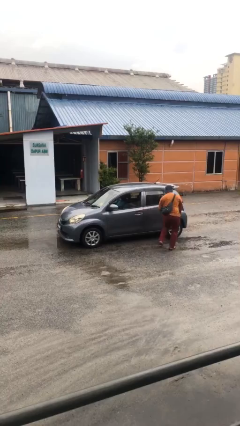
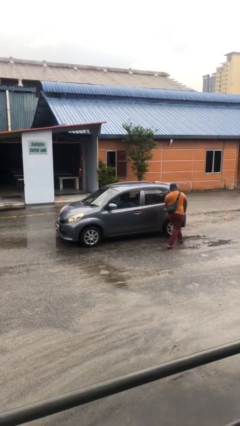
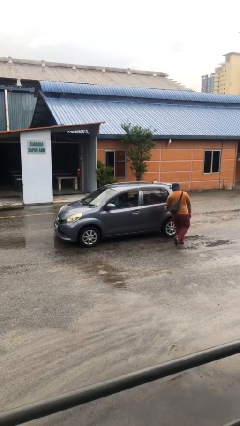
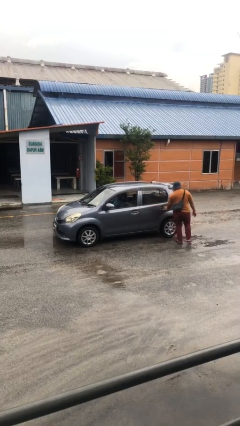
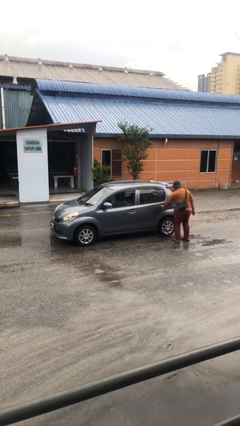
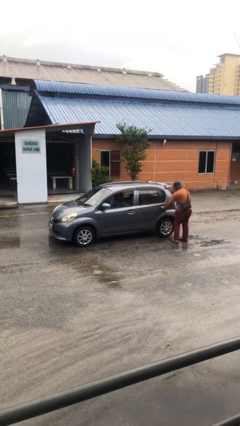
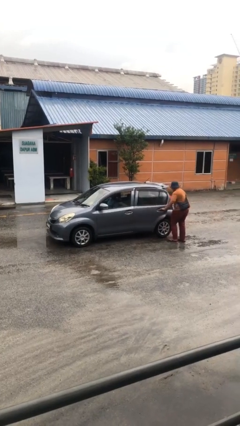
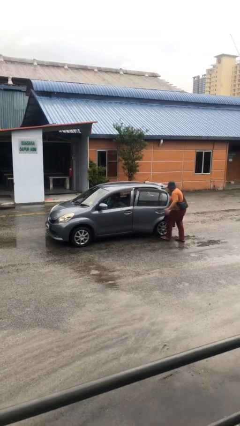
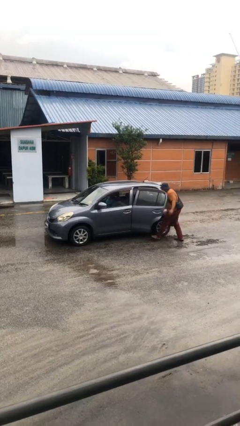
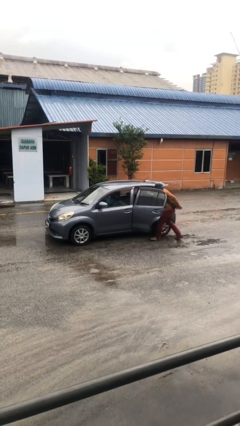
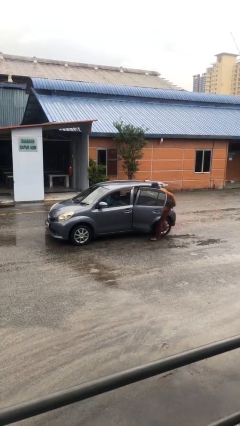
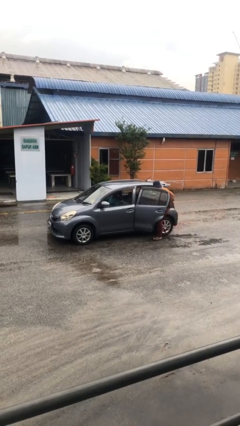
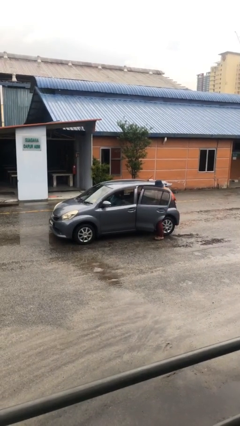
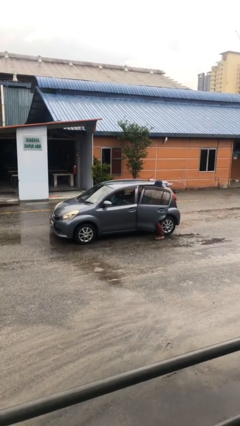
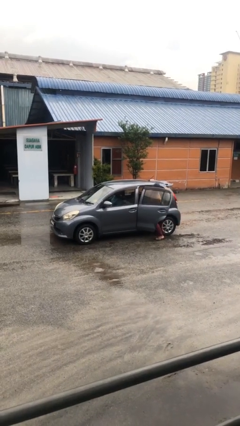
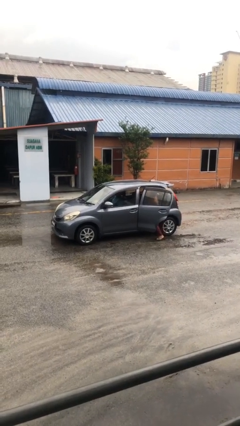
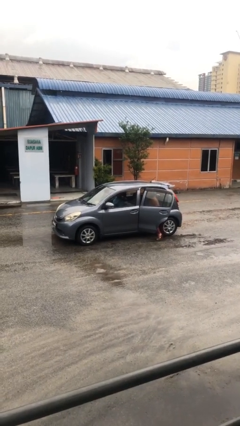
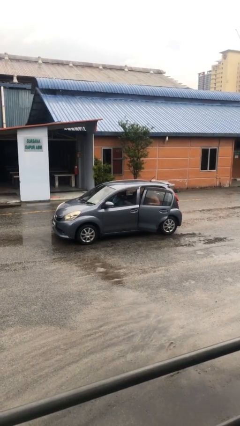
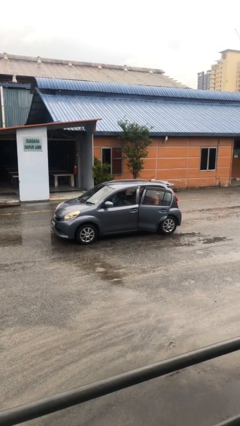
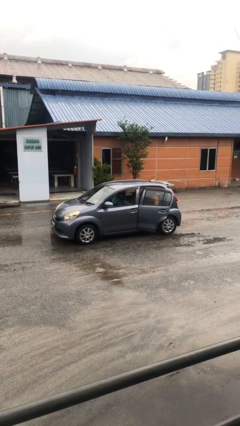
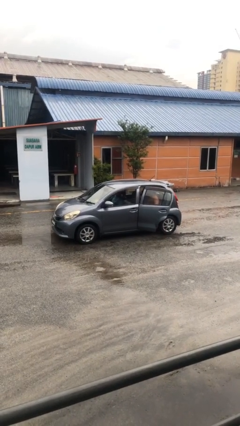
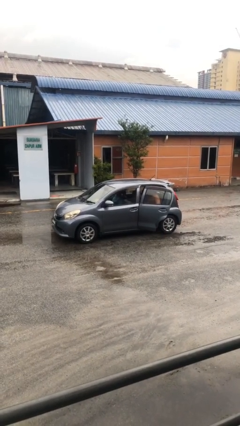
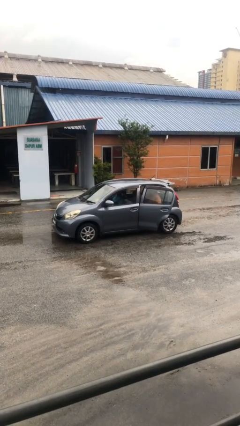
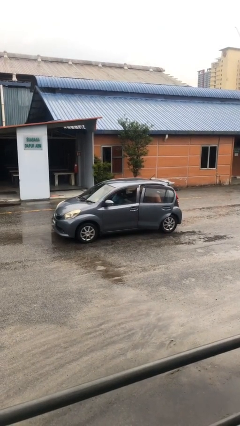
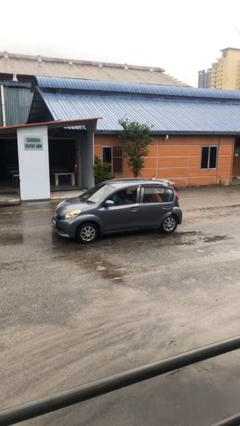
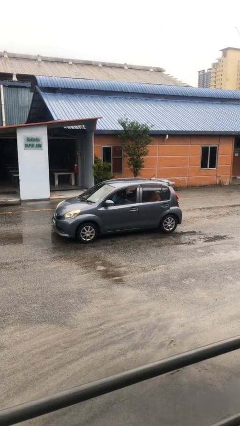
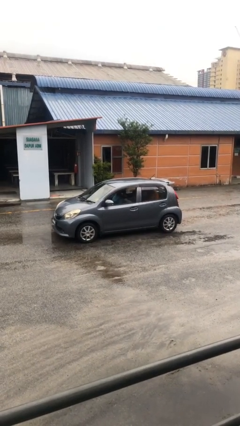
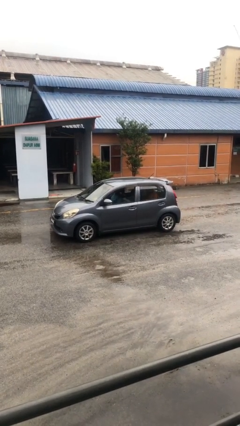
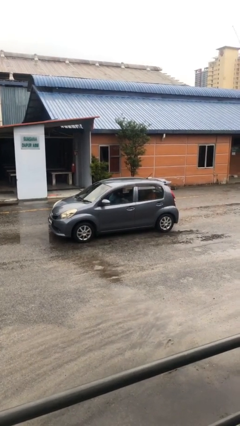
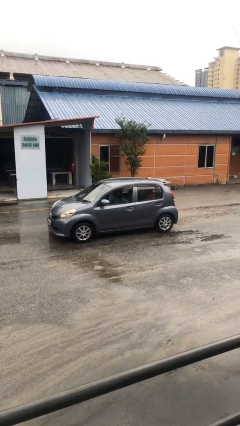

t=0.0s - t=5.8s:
car picks up person

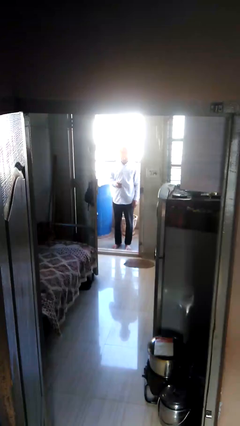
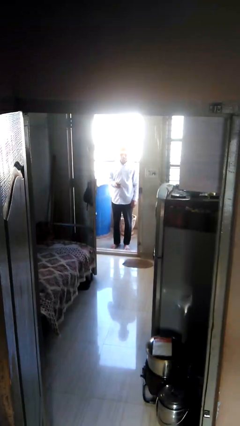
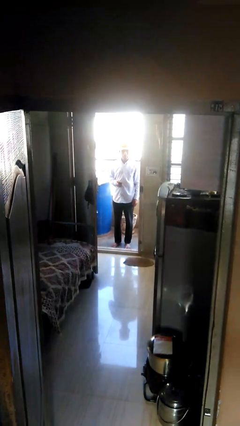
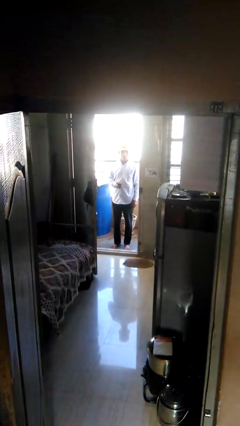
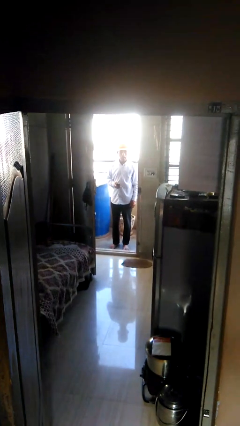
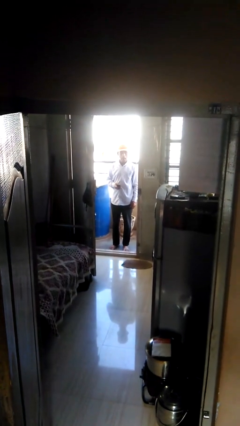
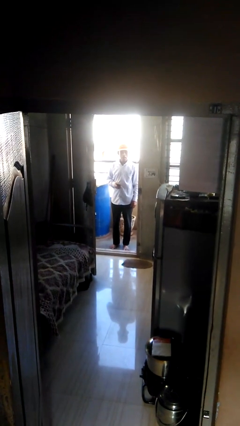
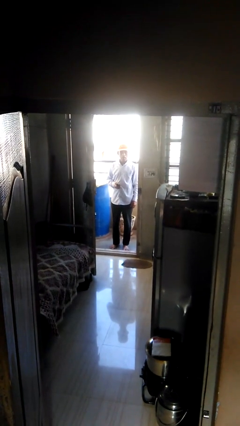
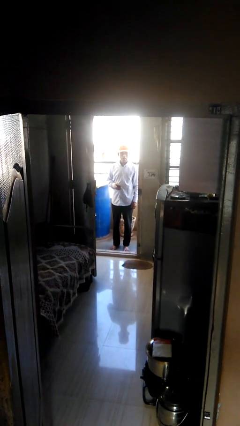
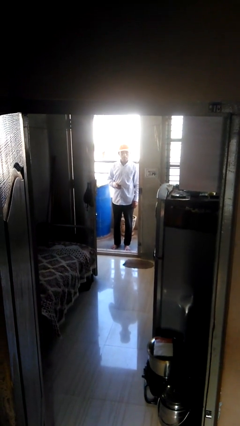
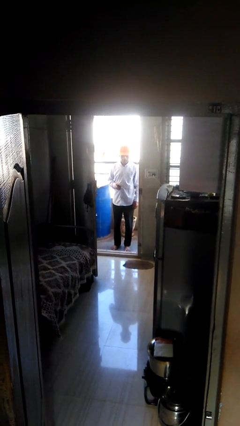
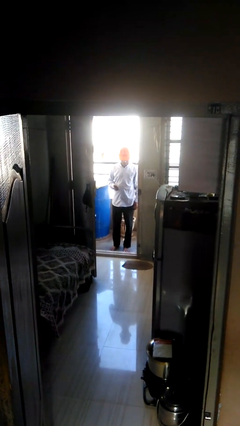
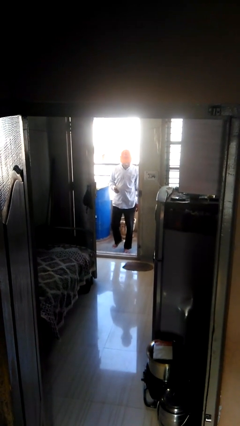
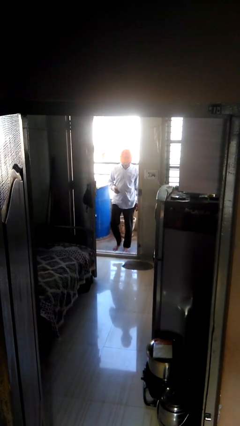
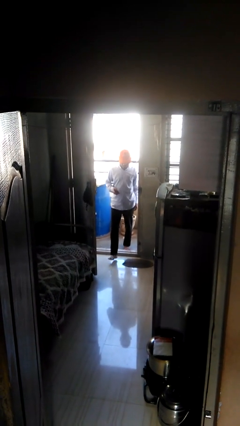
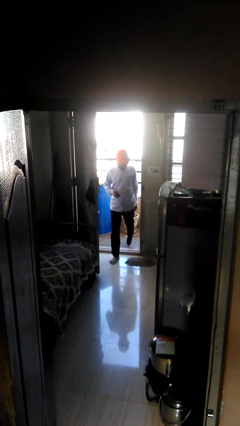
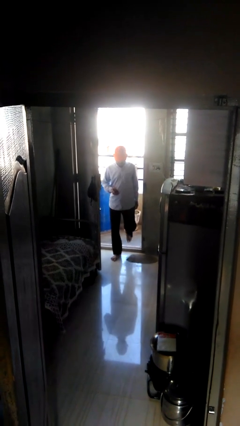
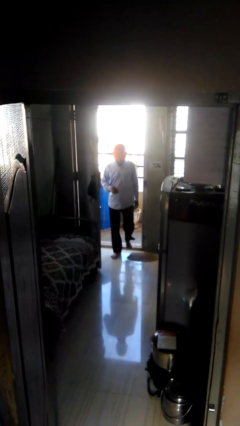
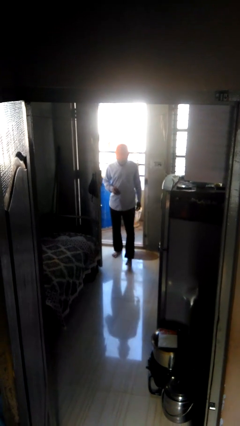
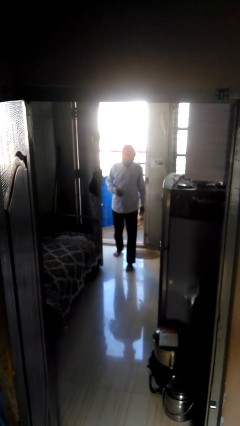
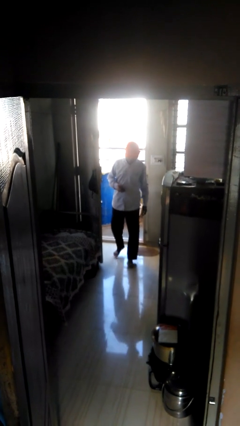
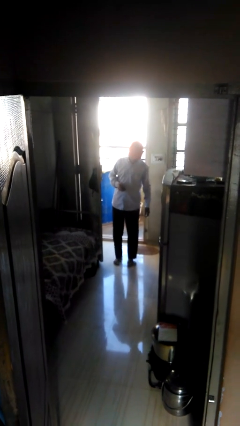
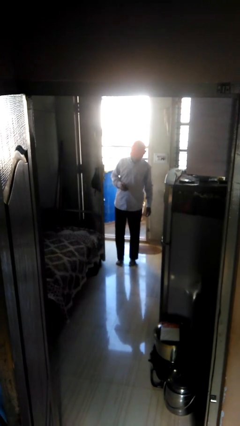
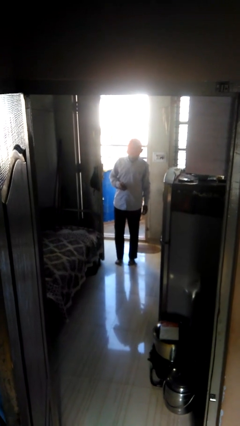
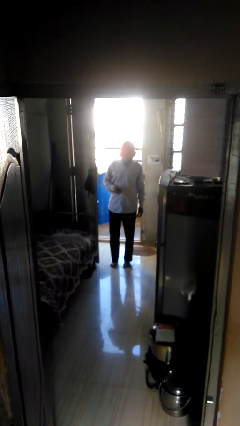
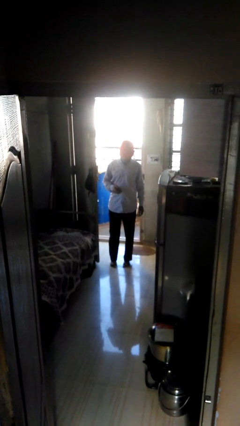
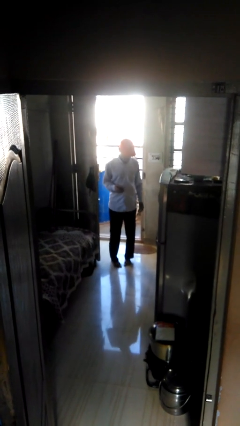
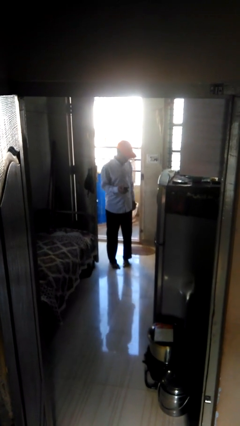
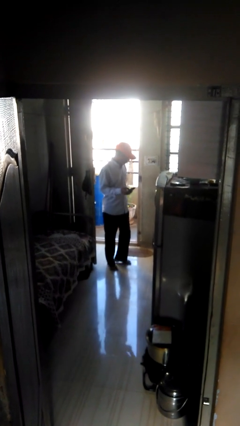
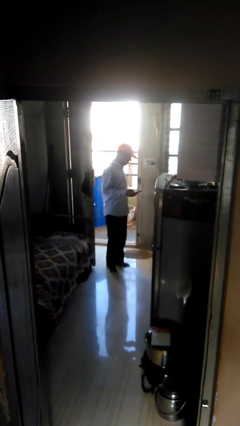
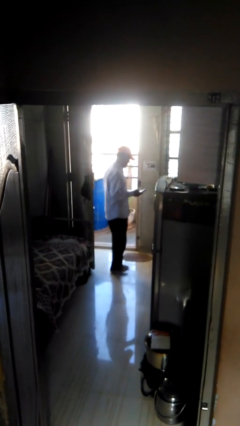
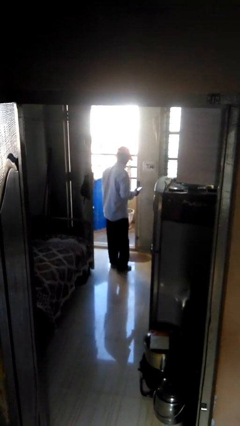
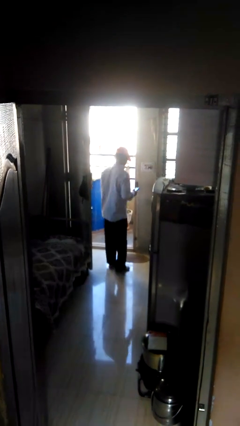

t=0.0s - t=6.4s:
person enters scene through structure

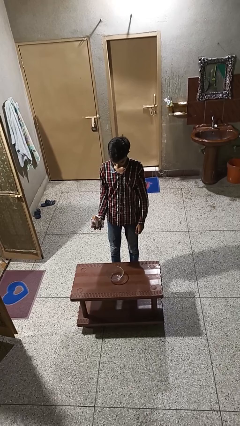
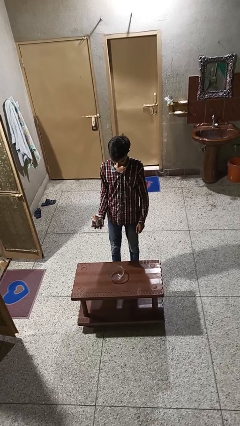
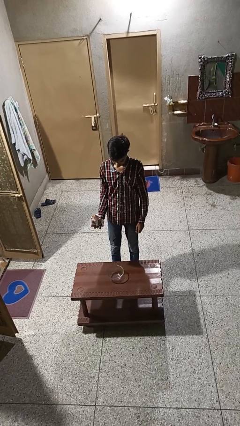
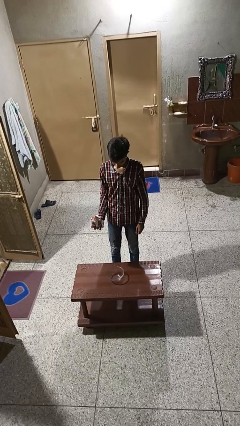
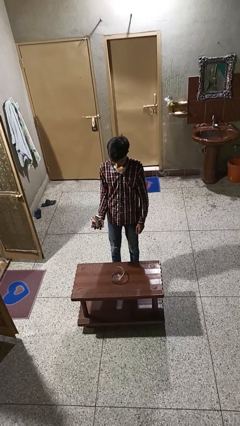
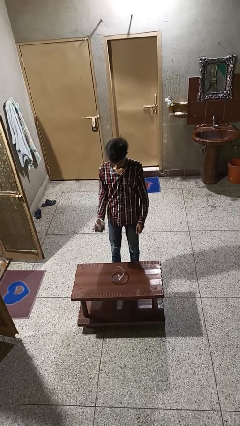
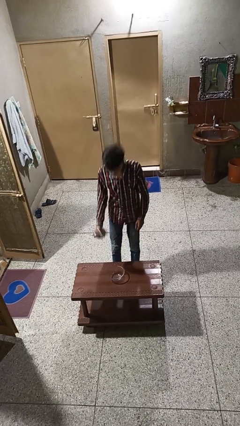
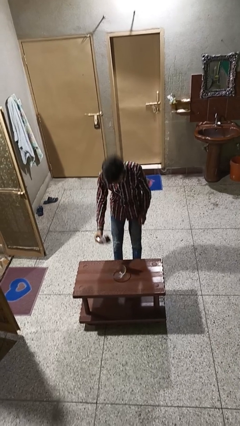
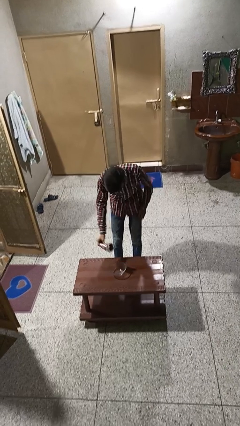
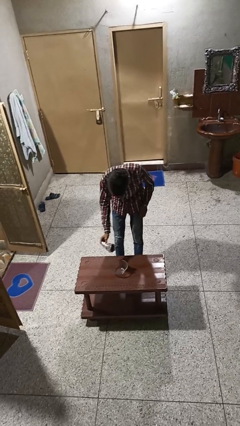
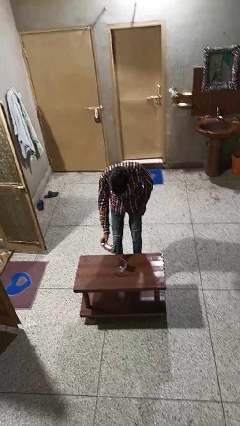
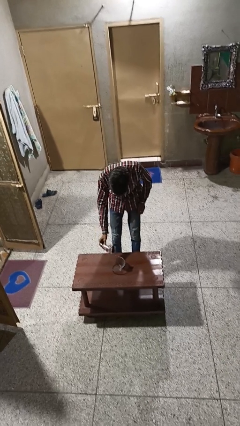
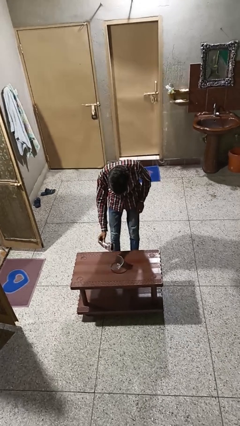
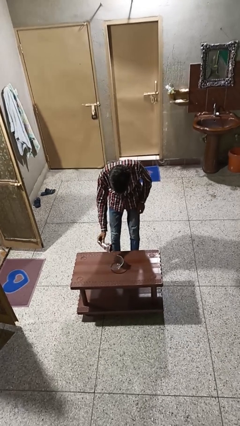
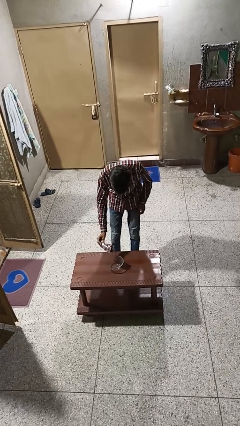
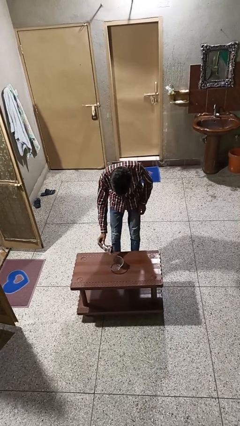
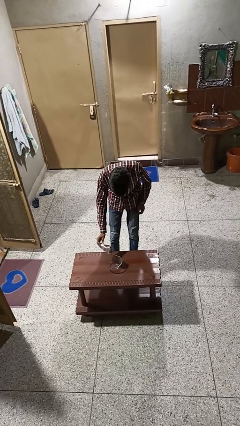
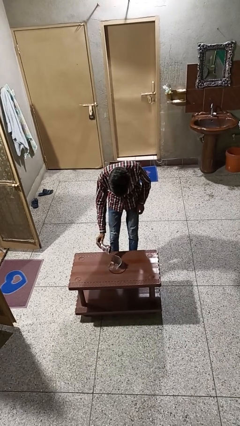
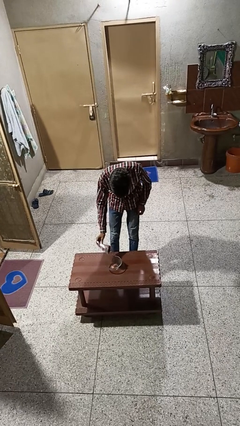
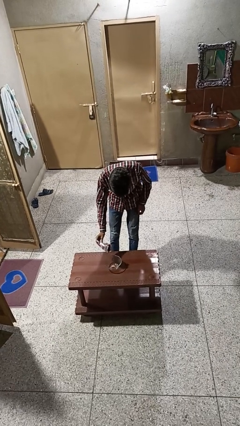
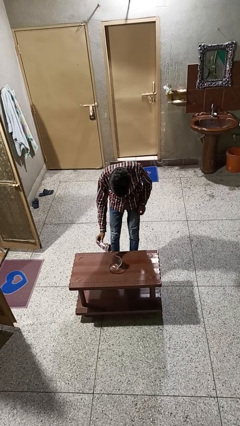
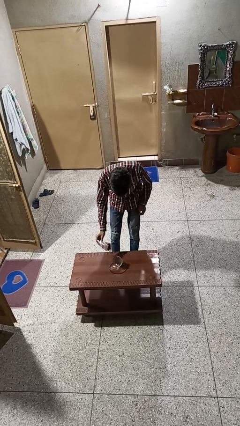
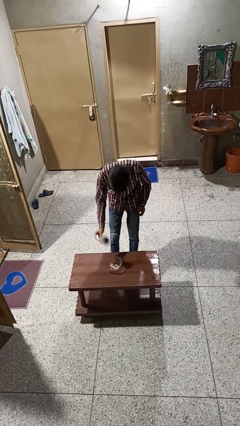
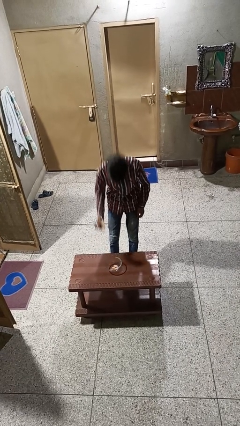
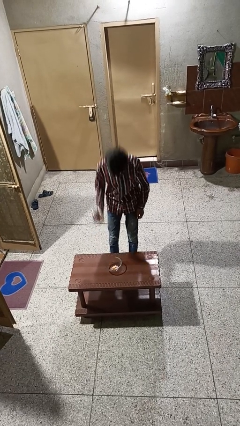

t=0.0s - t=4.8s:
person pours into bowl

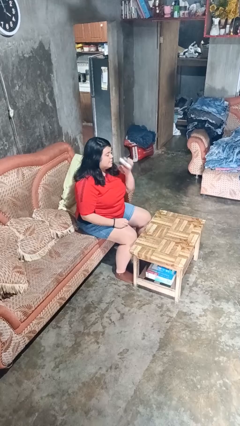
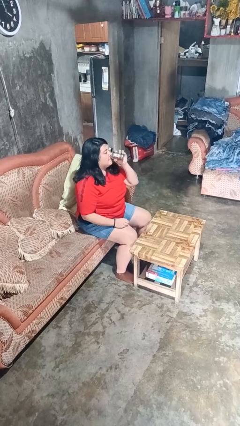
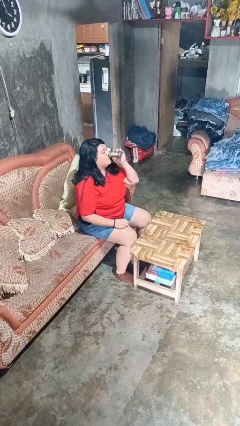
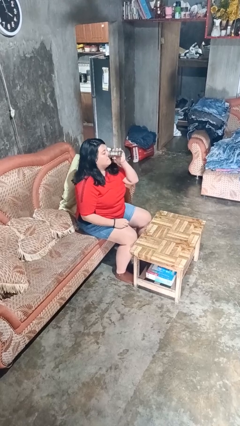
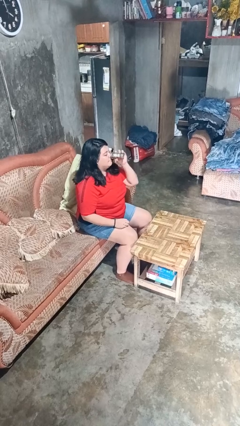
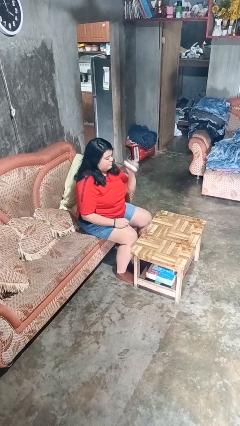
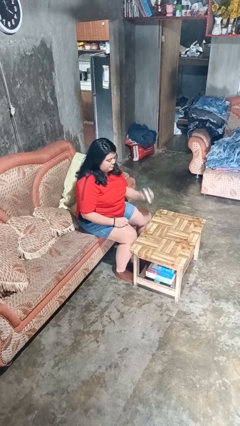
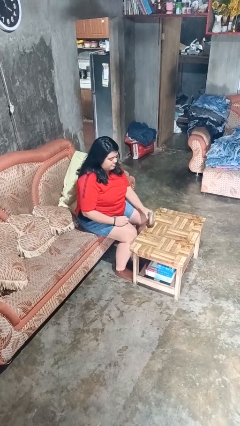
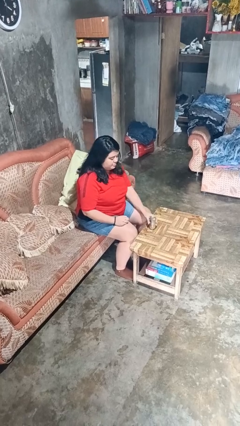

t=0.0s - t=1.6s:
person drinks from beverage can
